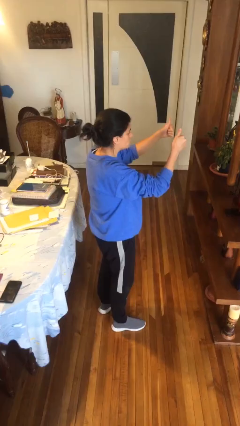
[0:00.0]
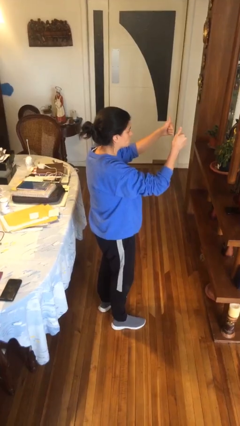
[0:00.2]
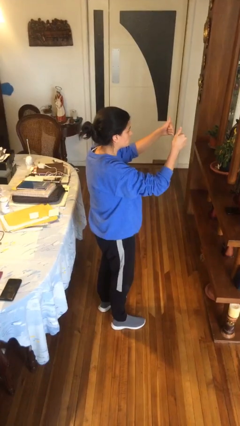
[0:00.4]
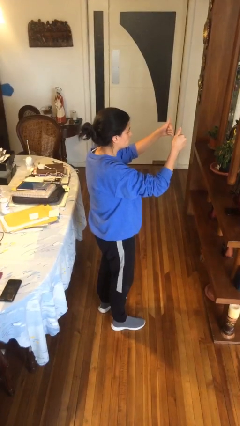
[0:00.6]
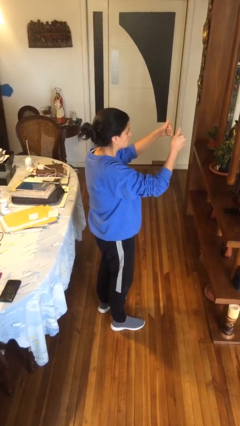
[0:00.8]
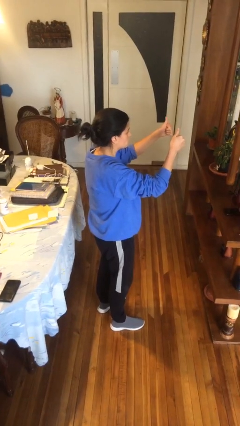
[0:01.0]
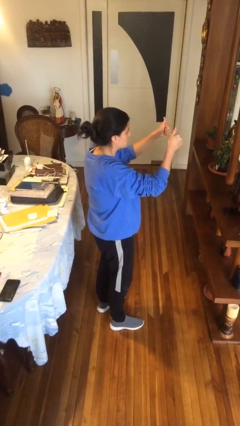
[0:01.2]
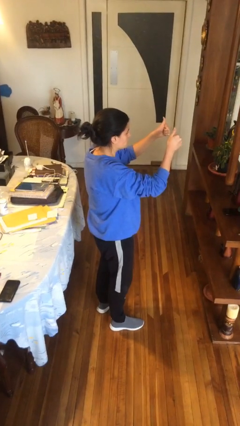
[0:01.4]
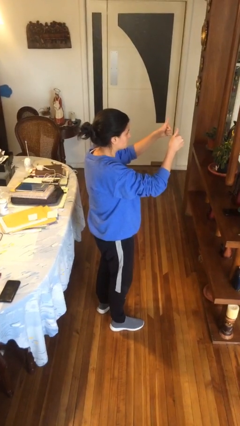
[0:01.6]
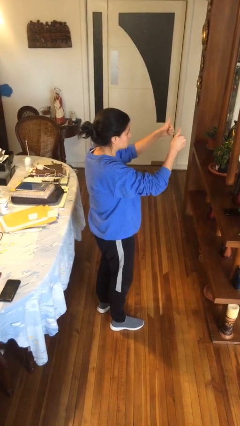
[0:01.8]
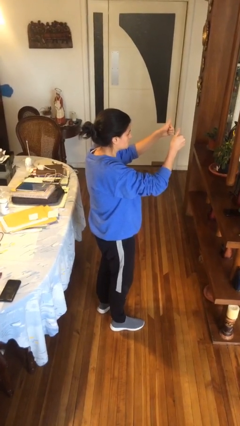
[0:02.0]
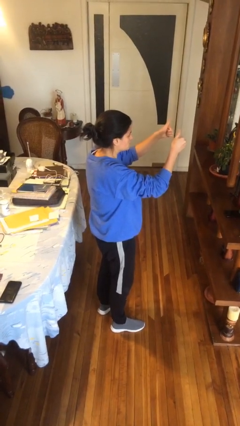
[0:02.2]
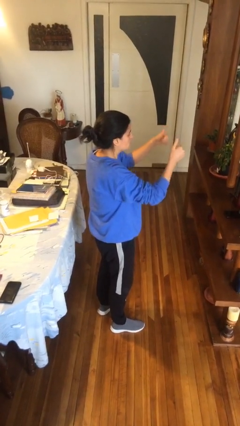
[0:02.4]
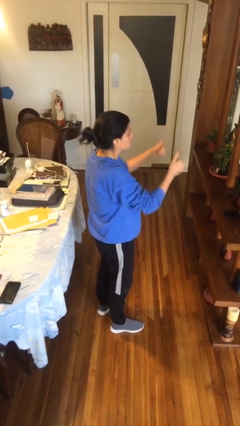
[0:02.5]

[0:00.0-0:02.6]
person gestures thumbs up

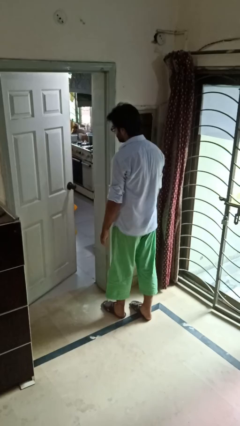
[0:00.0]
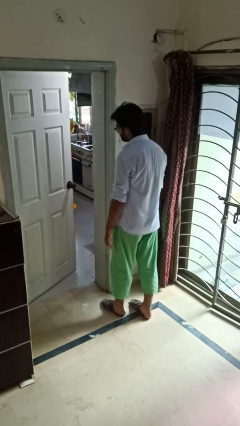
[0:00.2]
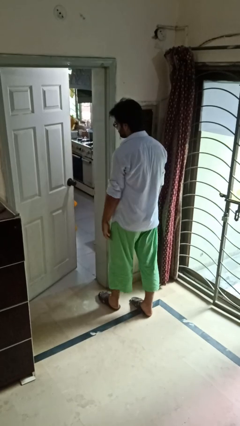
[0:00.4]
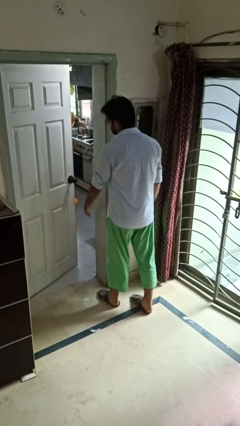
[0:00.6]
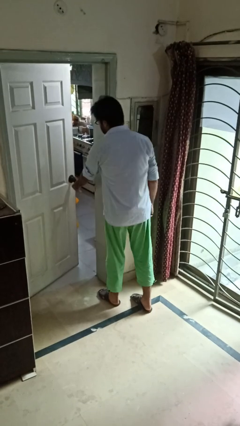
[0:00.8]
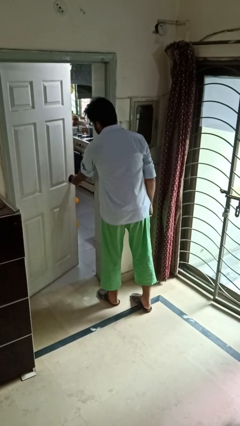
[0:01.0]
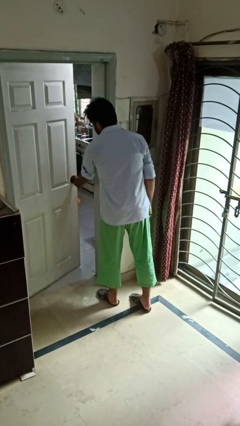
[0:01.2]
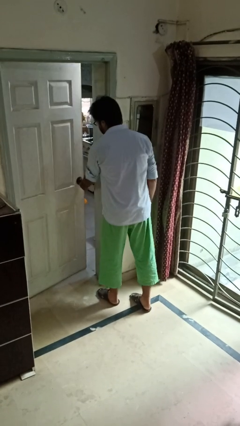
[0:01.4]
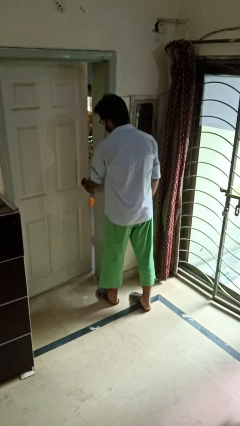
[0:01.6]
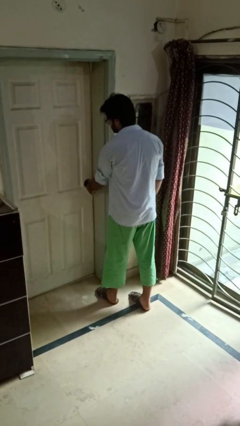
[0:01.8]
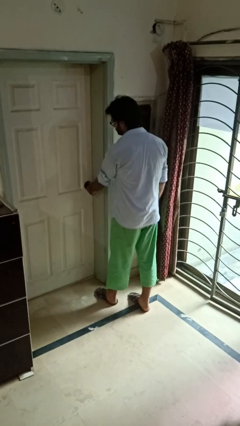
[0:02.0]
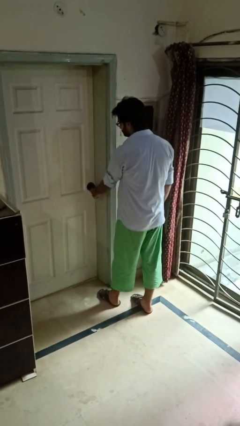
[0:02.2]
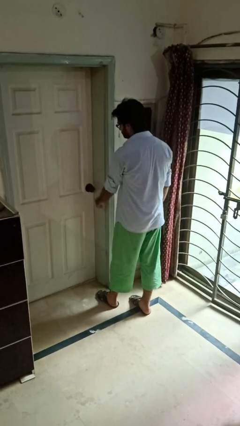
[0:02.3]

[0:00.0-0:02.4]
person closes facility door

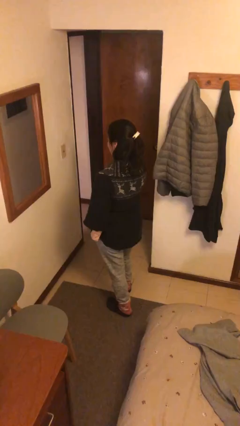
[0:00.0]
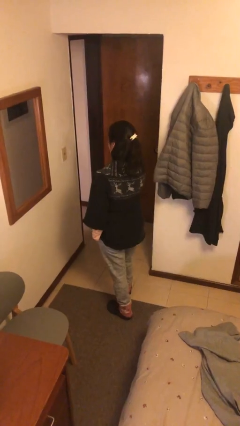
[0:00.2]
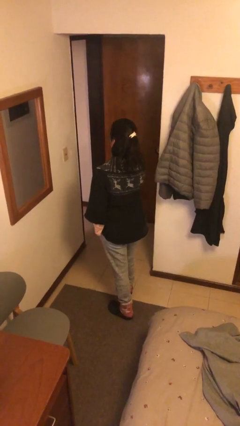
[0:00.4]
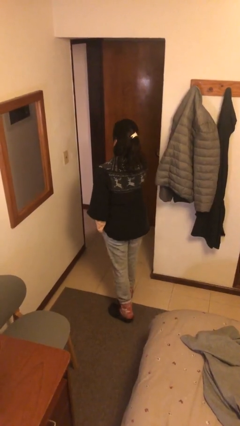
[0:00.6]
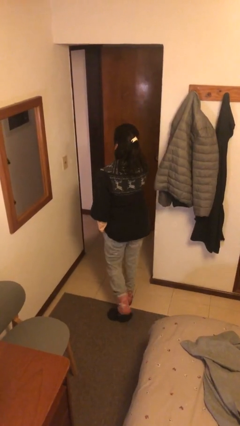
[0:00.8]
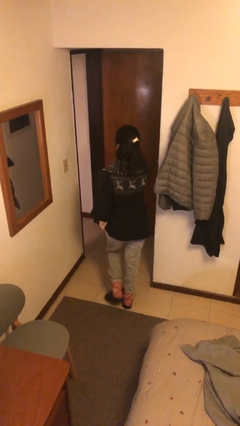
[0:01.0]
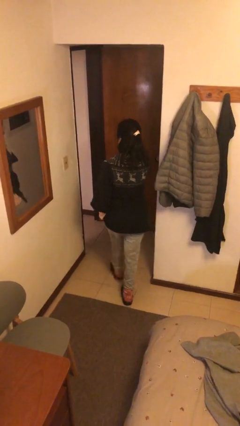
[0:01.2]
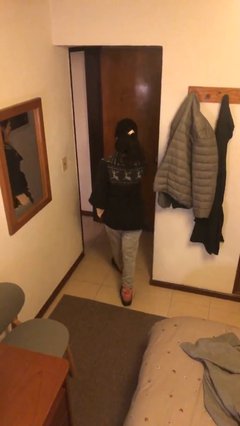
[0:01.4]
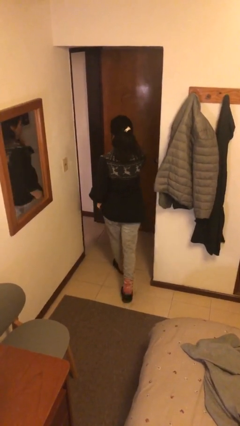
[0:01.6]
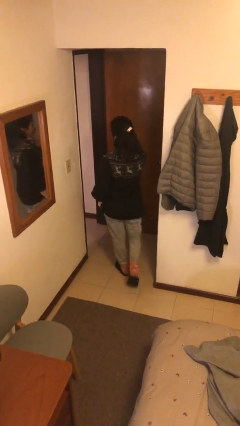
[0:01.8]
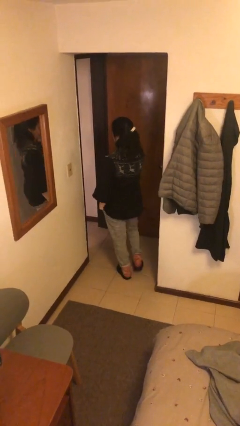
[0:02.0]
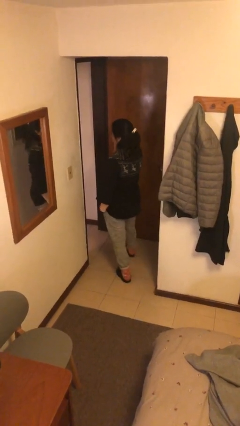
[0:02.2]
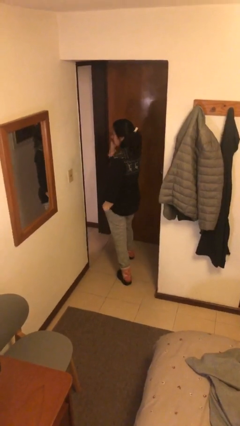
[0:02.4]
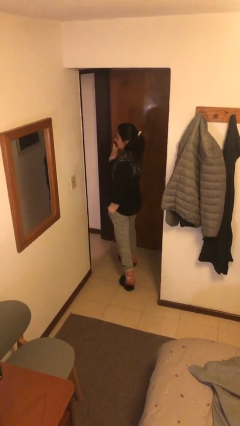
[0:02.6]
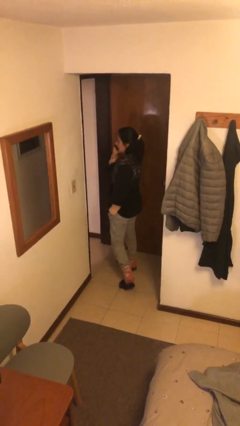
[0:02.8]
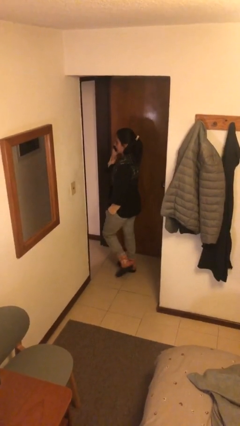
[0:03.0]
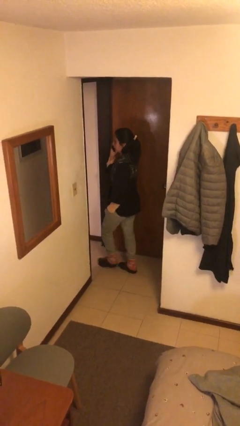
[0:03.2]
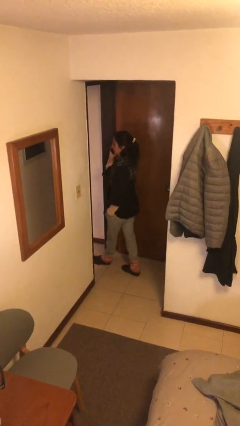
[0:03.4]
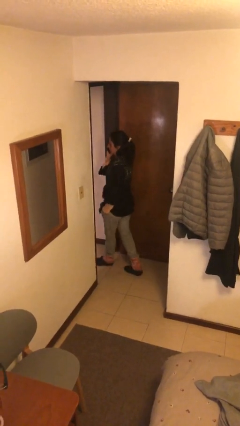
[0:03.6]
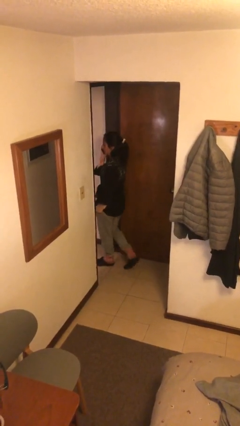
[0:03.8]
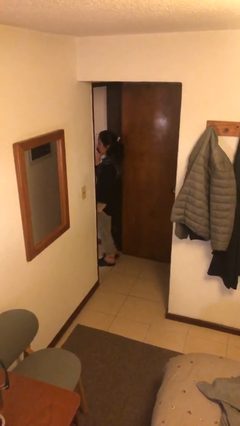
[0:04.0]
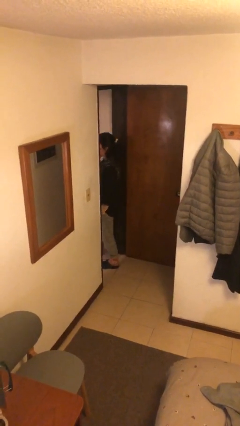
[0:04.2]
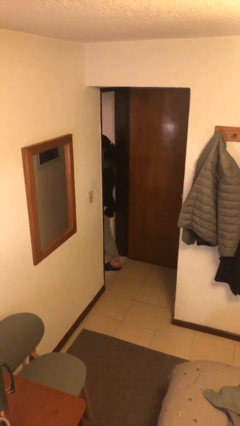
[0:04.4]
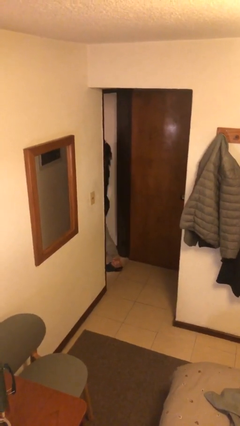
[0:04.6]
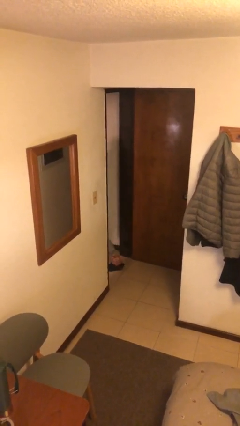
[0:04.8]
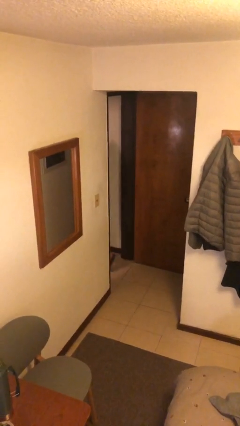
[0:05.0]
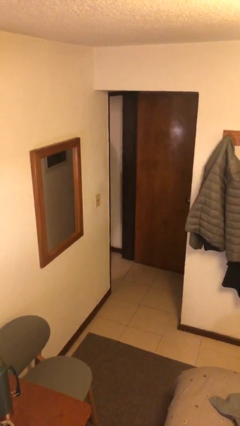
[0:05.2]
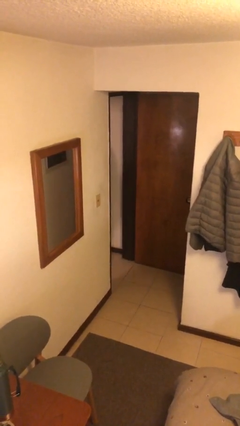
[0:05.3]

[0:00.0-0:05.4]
person exits scene through structure

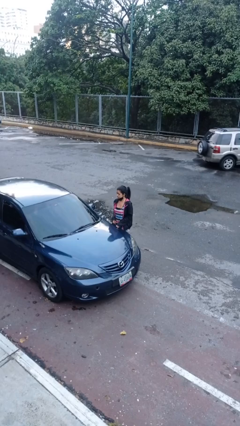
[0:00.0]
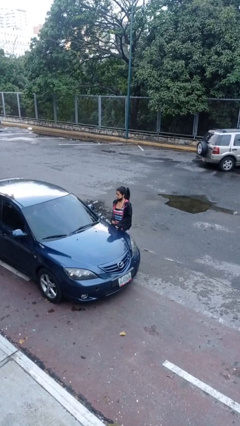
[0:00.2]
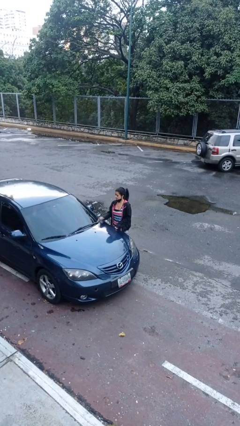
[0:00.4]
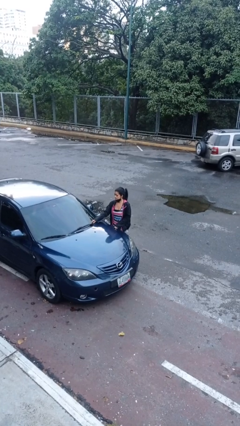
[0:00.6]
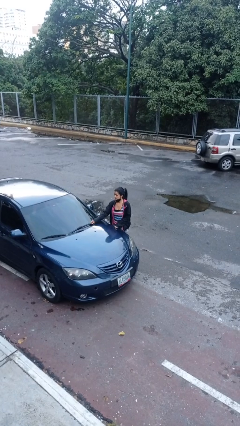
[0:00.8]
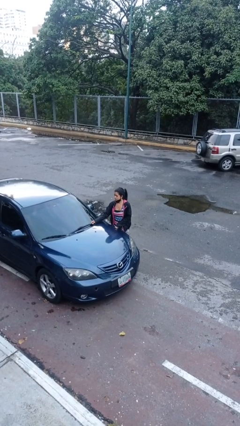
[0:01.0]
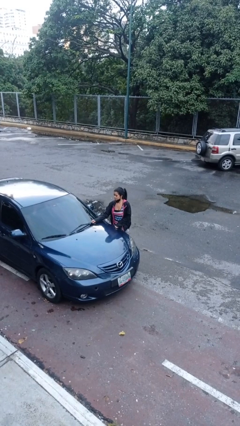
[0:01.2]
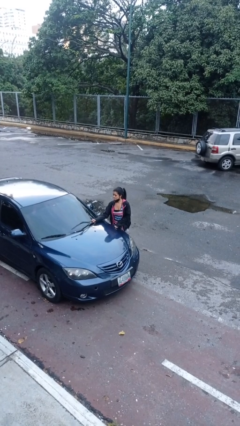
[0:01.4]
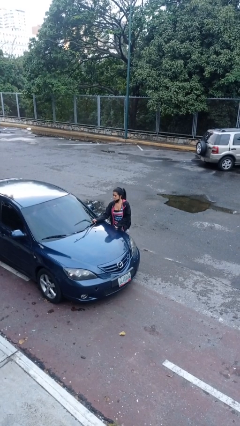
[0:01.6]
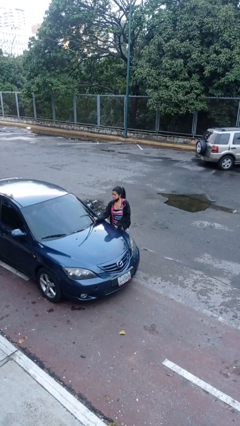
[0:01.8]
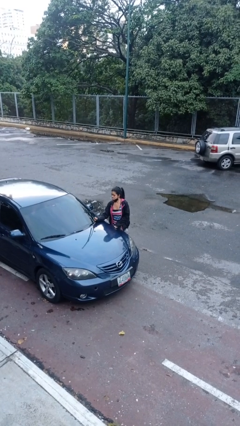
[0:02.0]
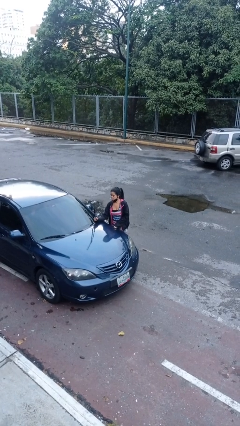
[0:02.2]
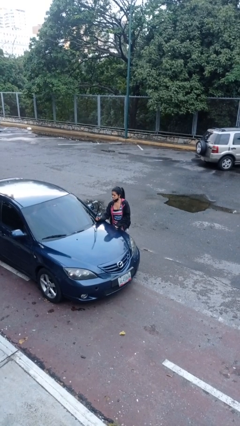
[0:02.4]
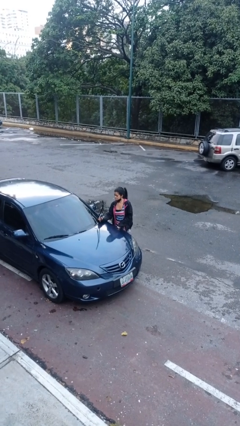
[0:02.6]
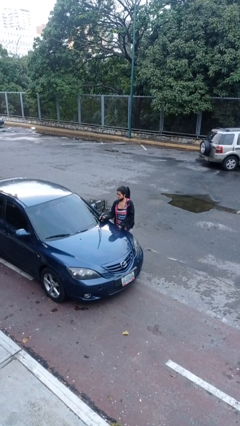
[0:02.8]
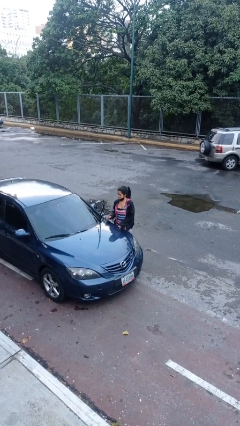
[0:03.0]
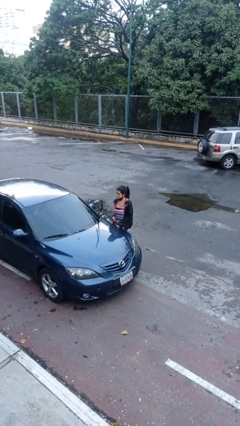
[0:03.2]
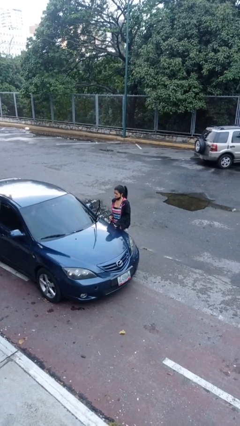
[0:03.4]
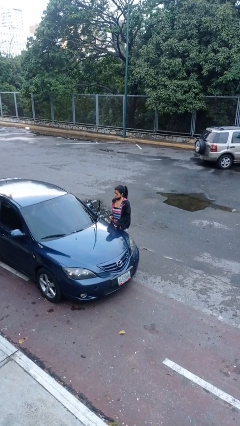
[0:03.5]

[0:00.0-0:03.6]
person flips up car wipers

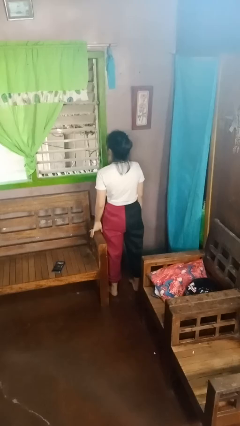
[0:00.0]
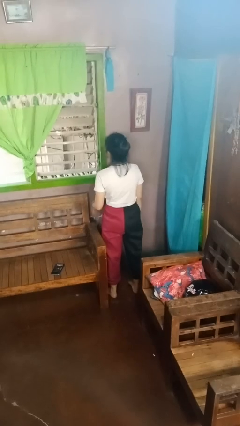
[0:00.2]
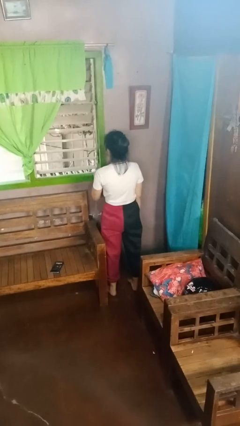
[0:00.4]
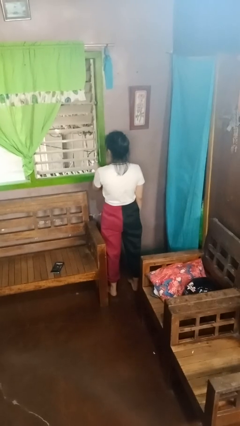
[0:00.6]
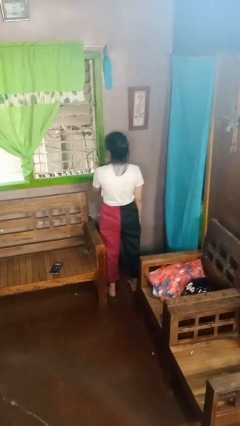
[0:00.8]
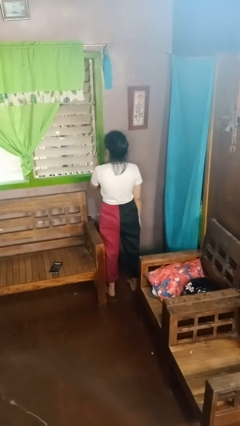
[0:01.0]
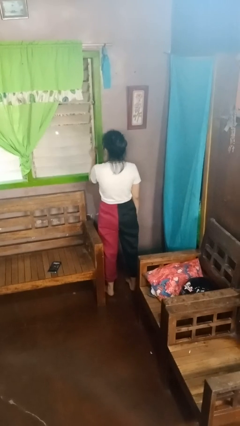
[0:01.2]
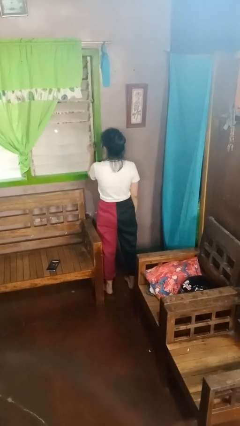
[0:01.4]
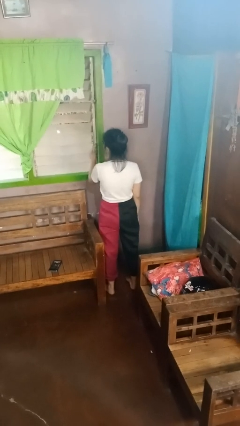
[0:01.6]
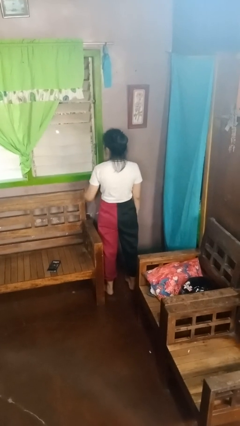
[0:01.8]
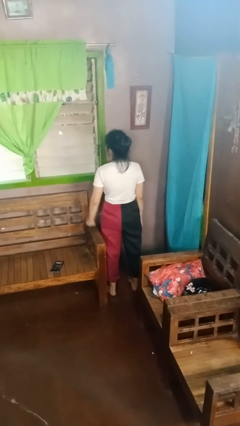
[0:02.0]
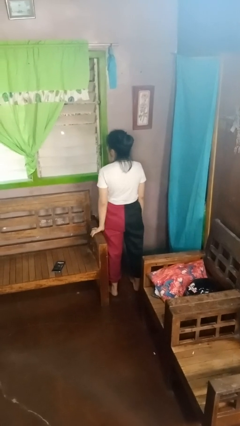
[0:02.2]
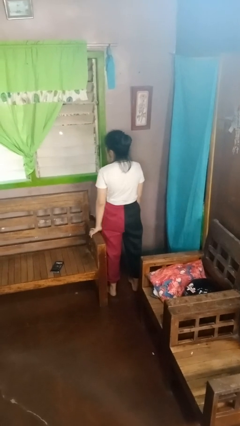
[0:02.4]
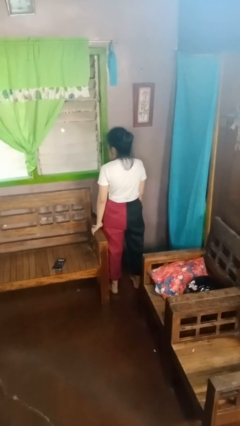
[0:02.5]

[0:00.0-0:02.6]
person closes home window

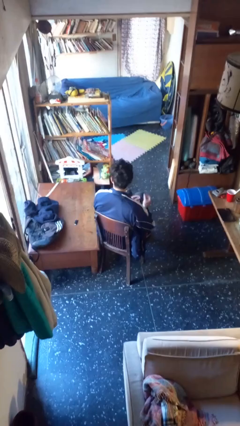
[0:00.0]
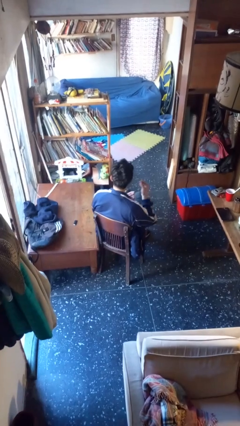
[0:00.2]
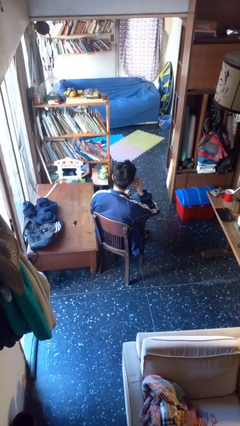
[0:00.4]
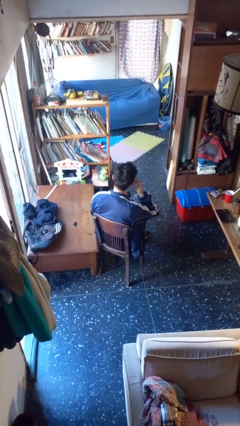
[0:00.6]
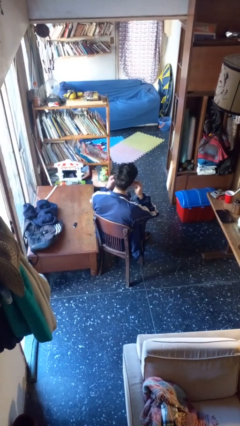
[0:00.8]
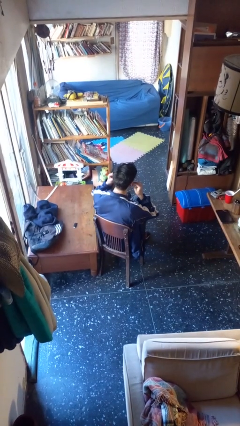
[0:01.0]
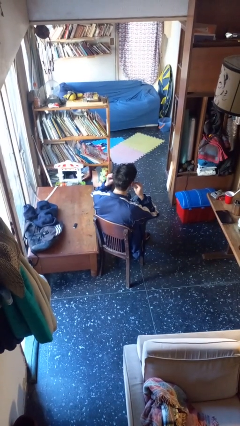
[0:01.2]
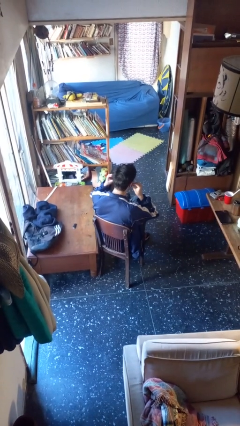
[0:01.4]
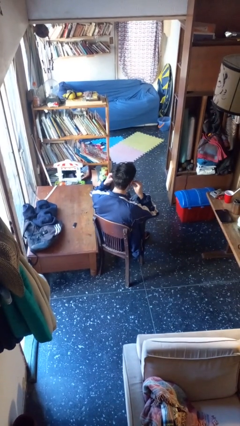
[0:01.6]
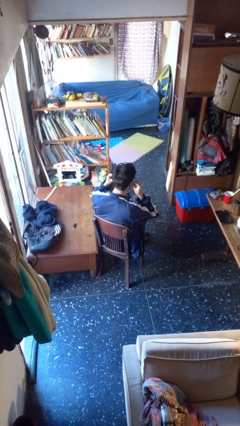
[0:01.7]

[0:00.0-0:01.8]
person puts on headphones
